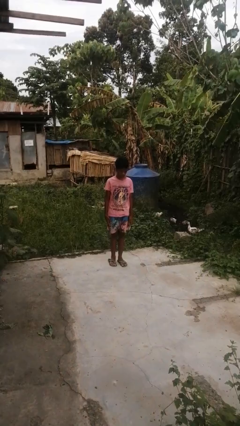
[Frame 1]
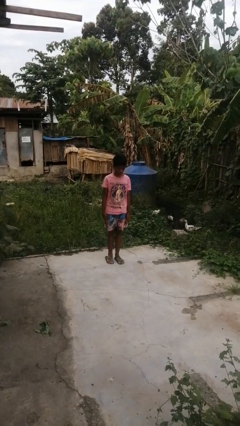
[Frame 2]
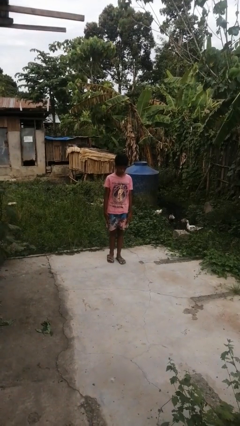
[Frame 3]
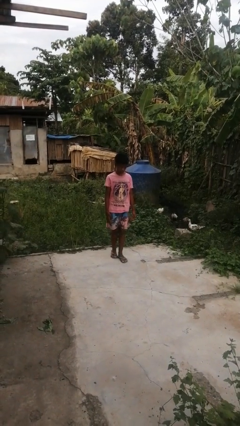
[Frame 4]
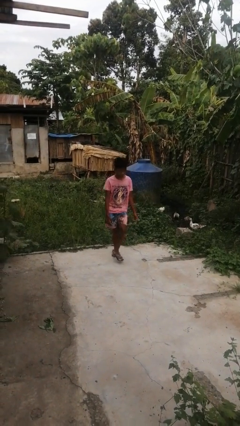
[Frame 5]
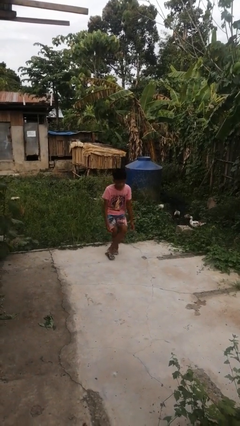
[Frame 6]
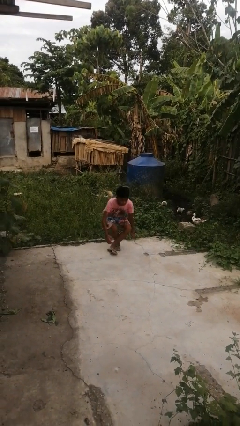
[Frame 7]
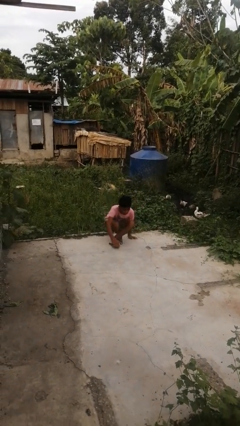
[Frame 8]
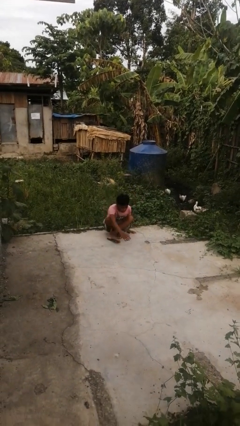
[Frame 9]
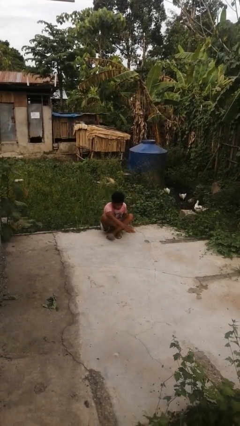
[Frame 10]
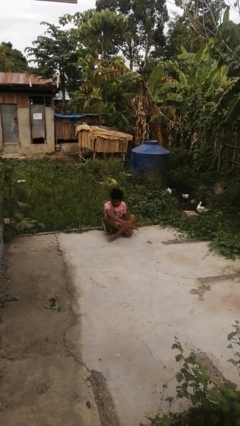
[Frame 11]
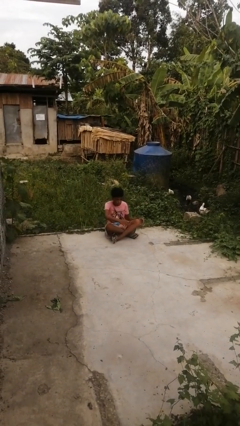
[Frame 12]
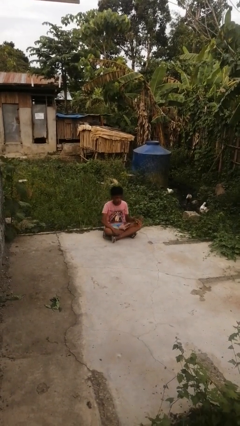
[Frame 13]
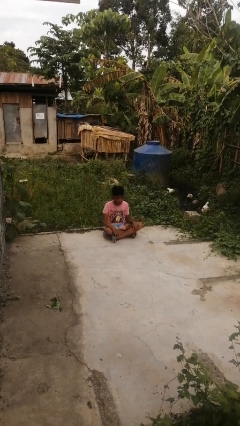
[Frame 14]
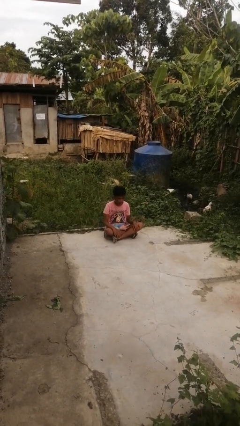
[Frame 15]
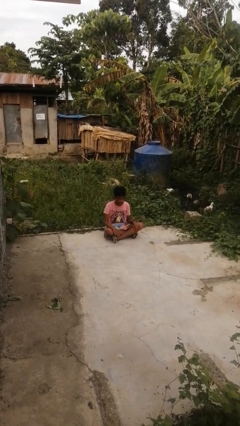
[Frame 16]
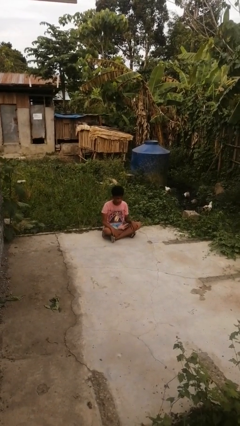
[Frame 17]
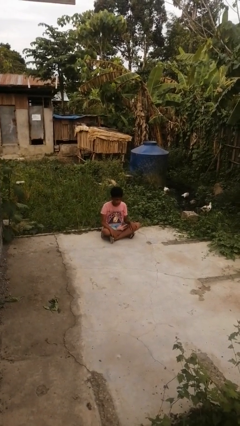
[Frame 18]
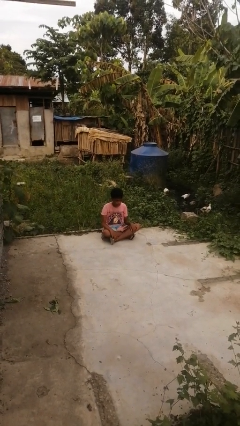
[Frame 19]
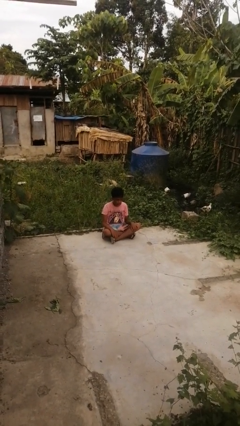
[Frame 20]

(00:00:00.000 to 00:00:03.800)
person sits crisscross

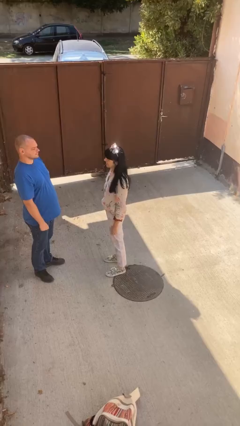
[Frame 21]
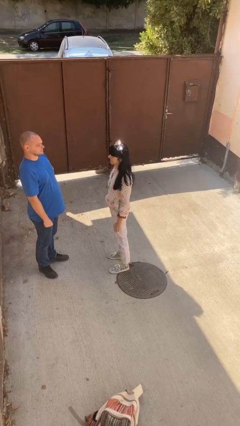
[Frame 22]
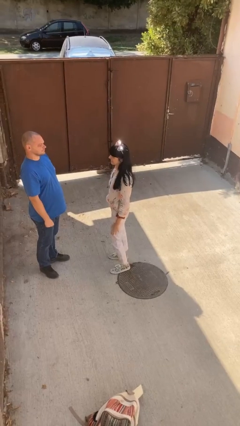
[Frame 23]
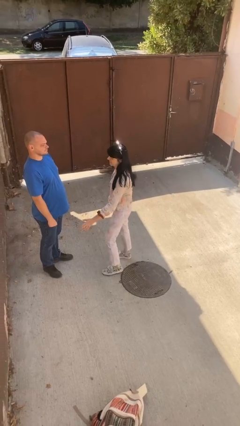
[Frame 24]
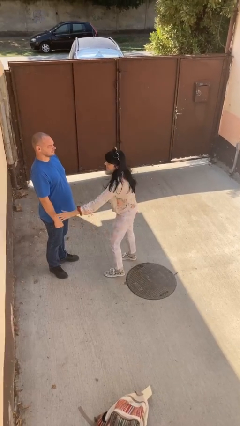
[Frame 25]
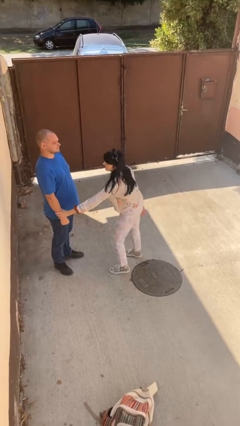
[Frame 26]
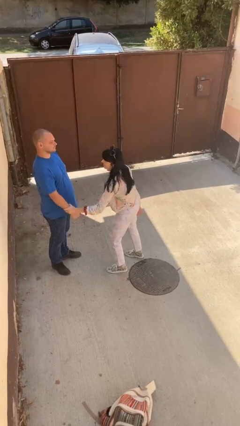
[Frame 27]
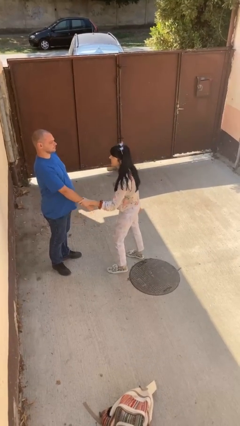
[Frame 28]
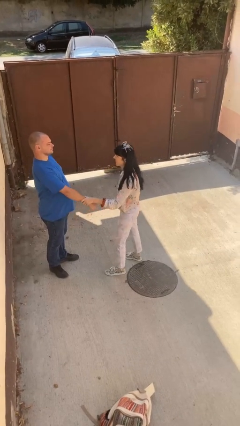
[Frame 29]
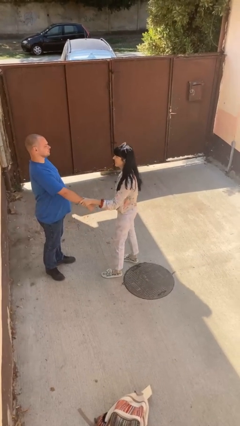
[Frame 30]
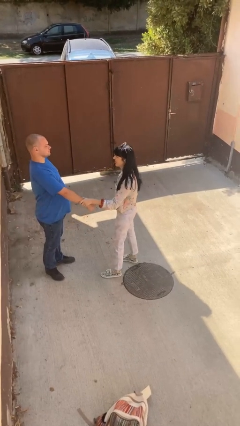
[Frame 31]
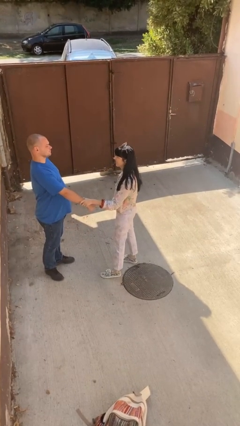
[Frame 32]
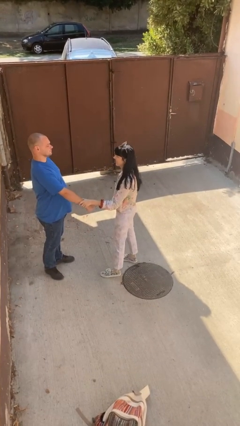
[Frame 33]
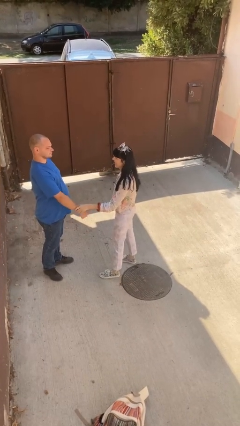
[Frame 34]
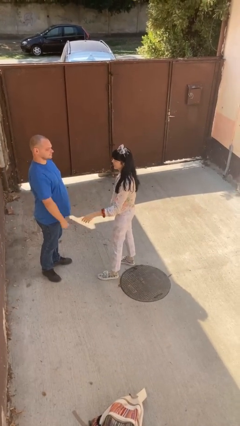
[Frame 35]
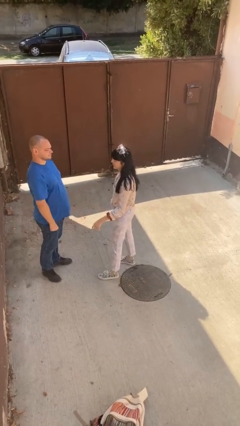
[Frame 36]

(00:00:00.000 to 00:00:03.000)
person grabs person by forearm

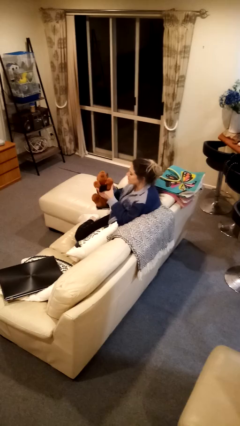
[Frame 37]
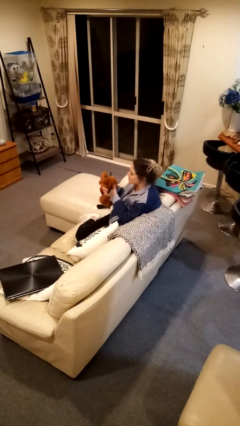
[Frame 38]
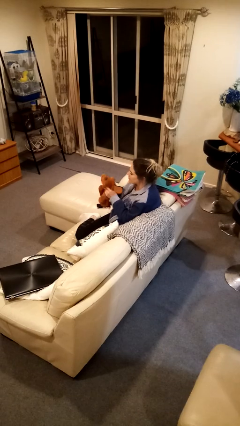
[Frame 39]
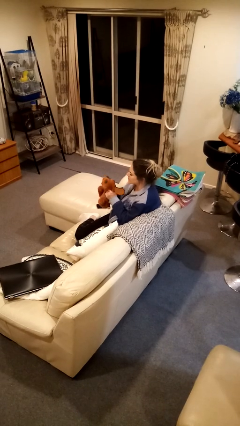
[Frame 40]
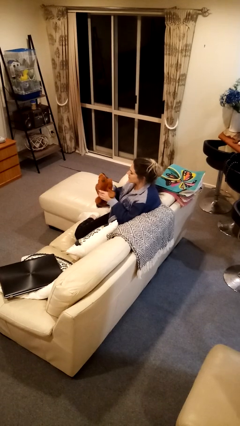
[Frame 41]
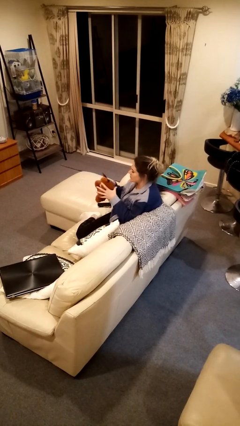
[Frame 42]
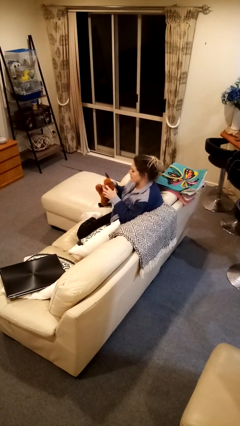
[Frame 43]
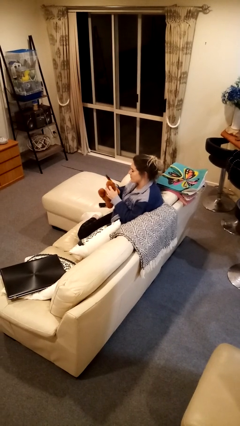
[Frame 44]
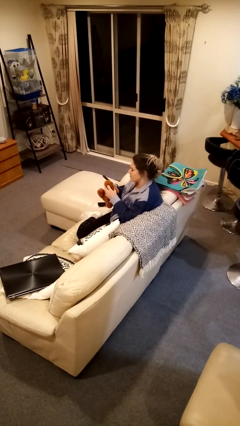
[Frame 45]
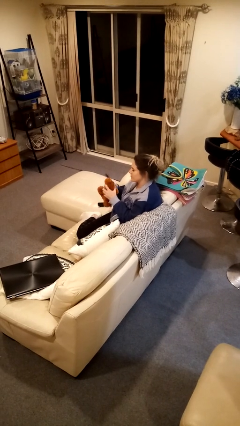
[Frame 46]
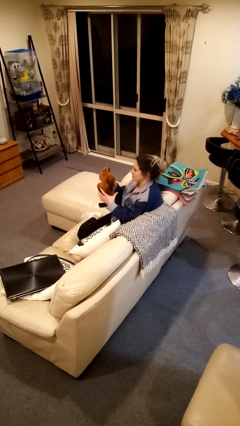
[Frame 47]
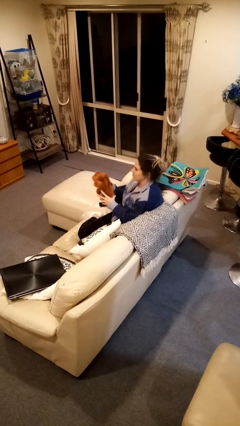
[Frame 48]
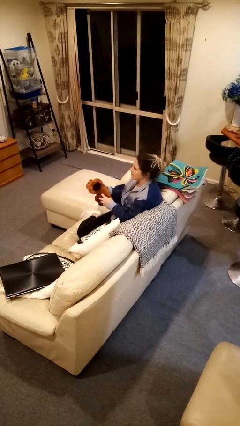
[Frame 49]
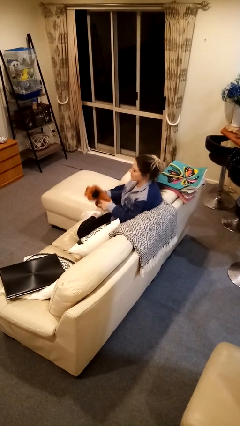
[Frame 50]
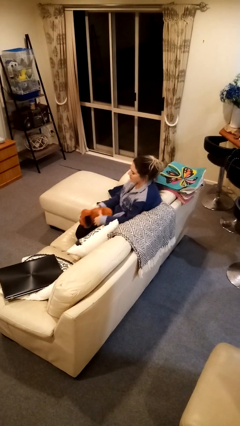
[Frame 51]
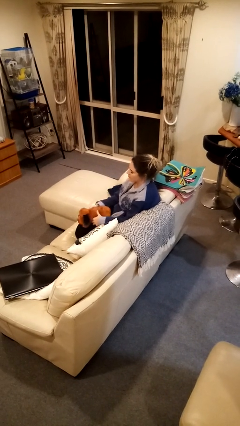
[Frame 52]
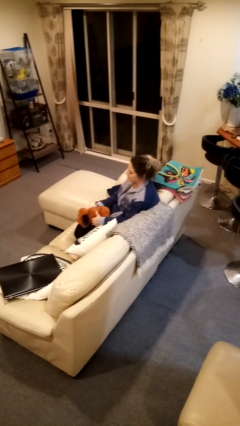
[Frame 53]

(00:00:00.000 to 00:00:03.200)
person squeezes object

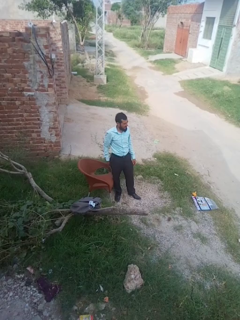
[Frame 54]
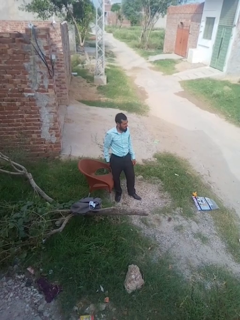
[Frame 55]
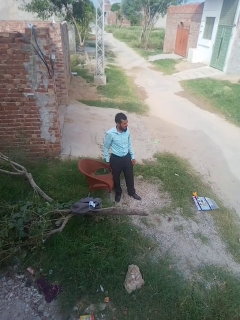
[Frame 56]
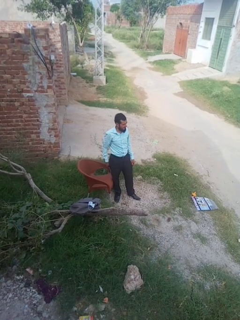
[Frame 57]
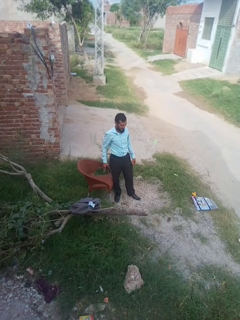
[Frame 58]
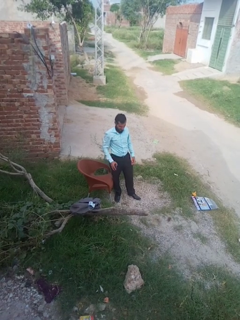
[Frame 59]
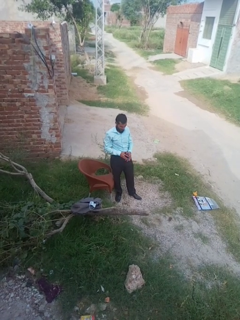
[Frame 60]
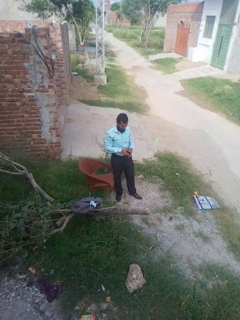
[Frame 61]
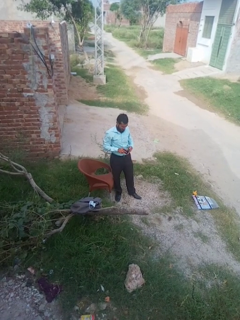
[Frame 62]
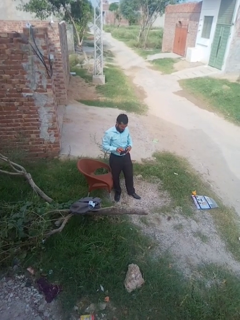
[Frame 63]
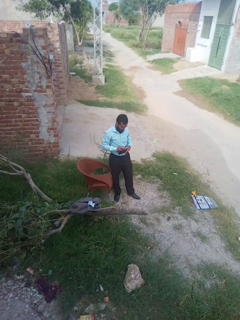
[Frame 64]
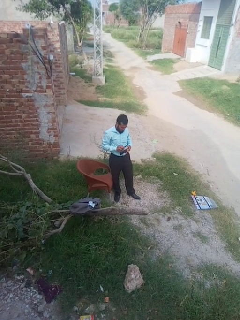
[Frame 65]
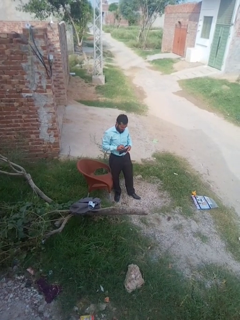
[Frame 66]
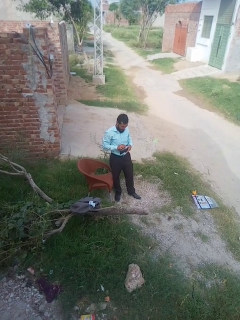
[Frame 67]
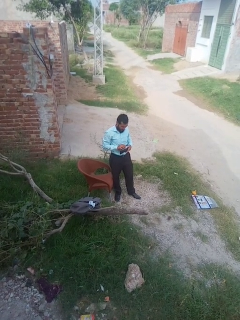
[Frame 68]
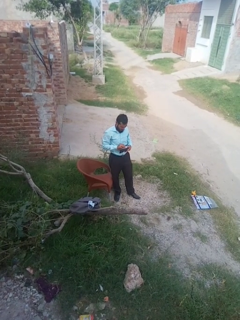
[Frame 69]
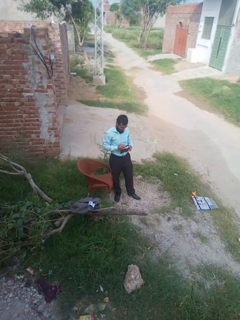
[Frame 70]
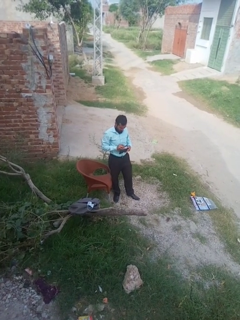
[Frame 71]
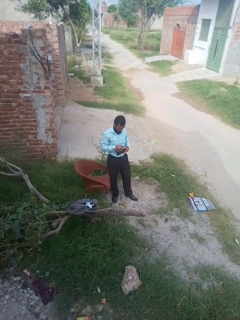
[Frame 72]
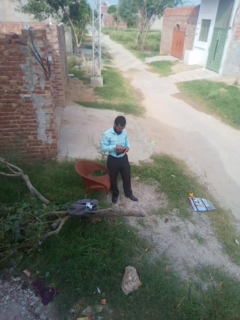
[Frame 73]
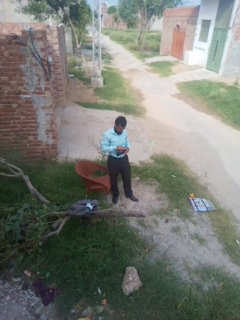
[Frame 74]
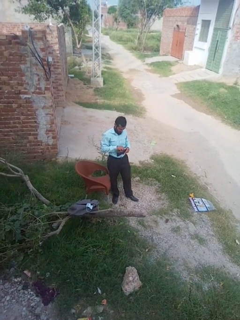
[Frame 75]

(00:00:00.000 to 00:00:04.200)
person searches in purse

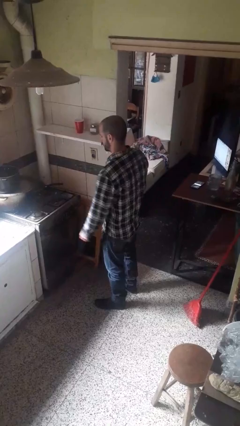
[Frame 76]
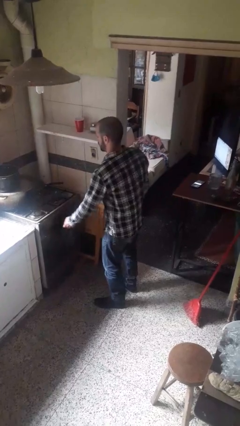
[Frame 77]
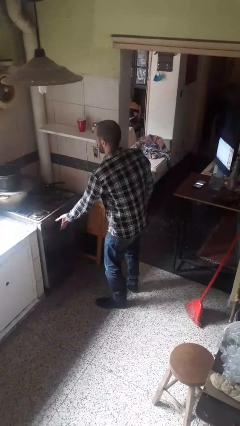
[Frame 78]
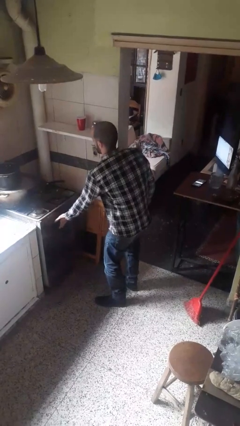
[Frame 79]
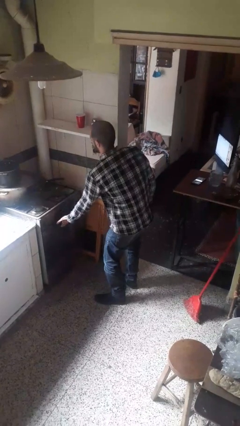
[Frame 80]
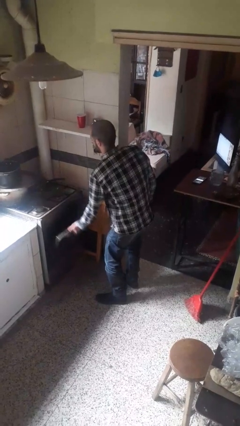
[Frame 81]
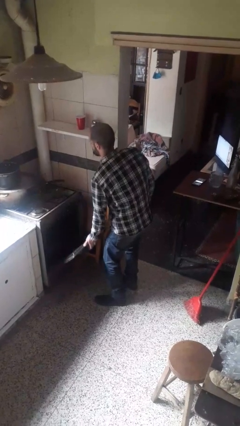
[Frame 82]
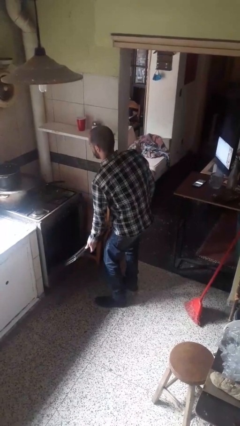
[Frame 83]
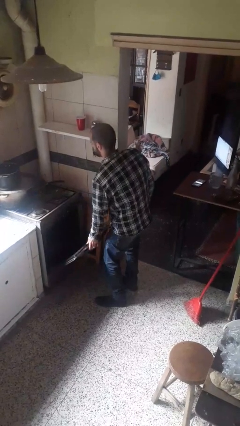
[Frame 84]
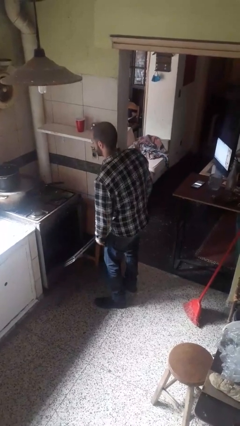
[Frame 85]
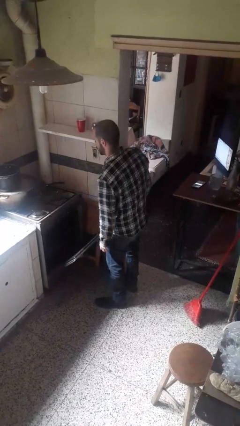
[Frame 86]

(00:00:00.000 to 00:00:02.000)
person opens oven door

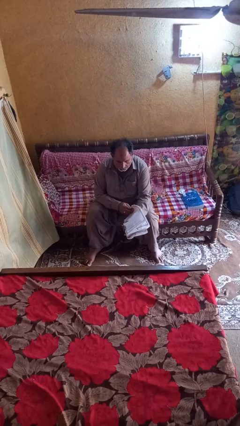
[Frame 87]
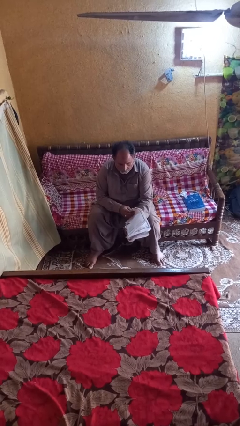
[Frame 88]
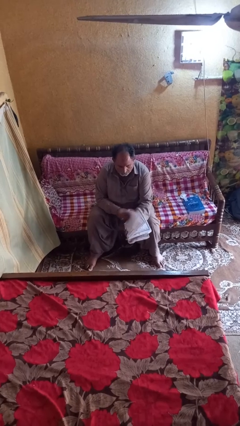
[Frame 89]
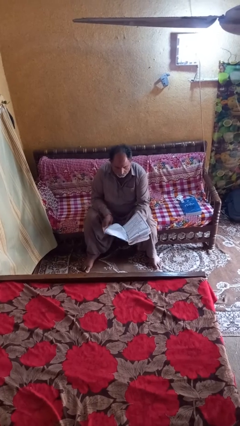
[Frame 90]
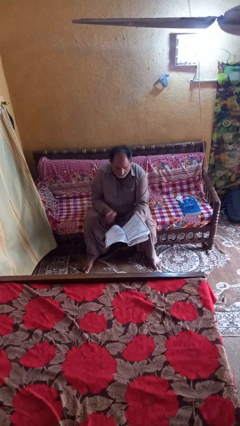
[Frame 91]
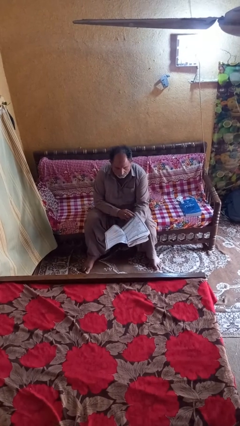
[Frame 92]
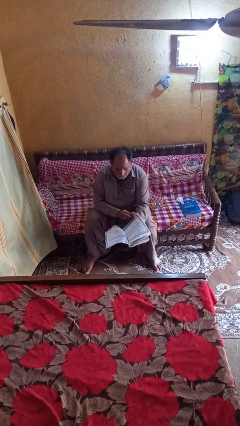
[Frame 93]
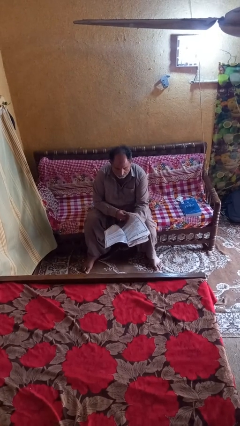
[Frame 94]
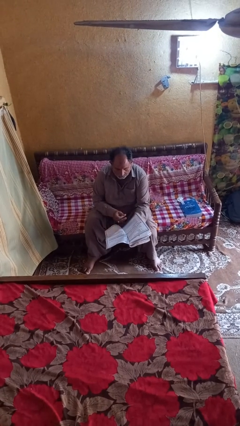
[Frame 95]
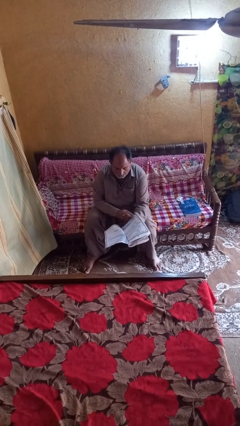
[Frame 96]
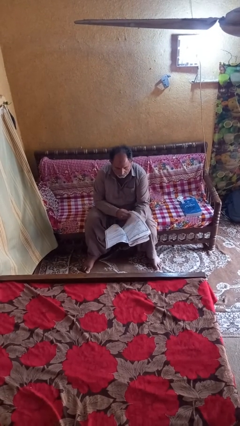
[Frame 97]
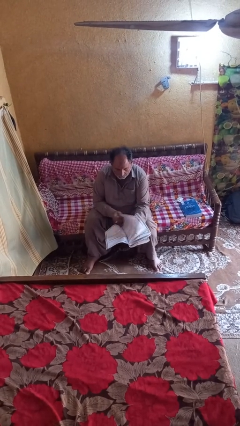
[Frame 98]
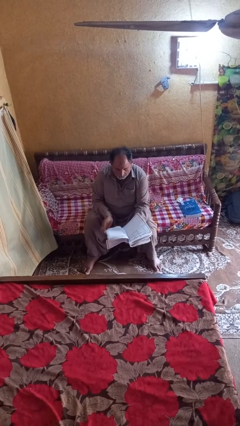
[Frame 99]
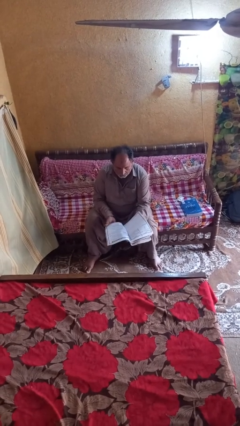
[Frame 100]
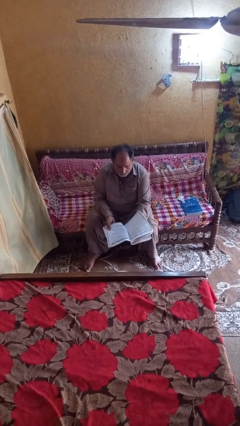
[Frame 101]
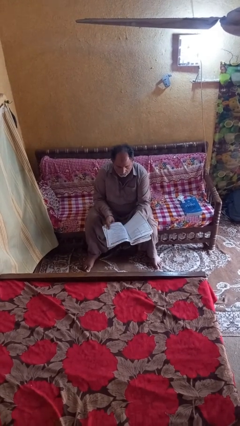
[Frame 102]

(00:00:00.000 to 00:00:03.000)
person reads magazine
